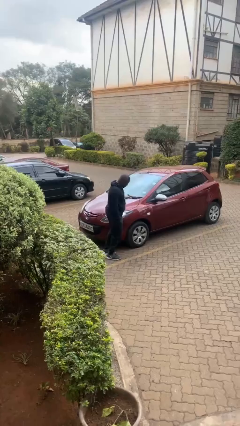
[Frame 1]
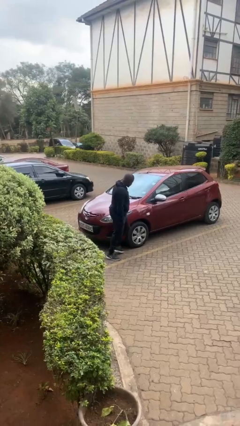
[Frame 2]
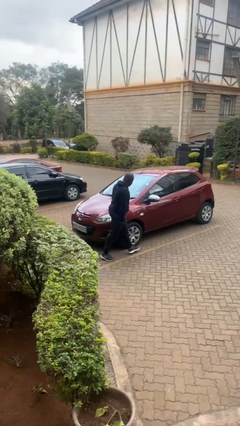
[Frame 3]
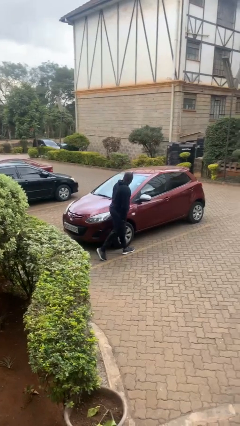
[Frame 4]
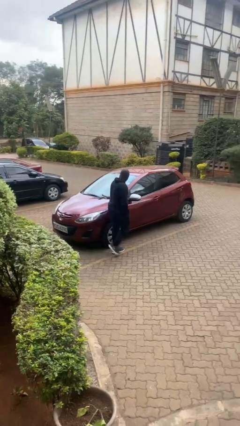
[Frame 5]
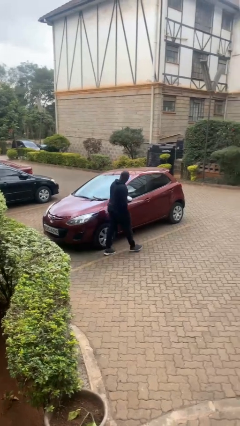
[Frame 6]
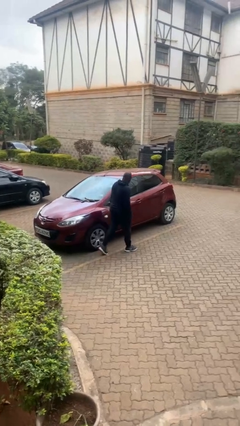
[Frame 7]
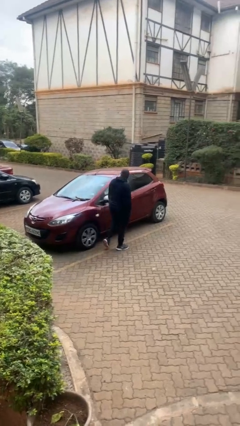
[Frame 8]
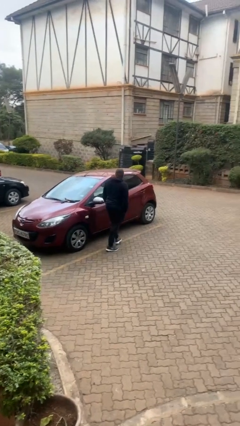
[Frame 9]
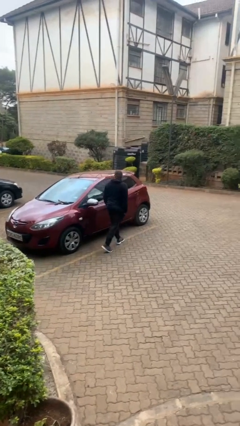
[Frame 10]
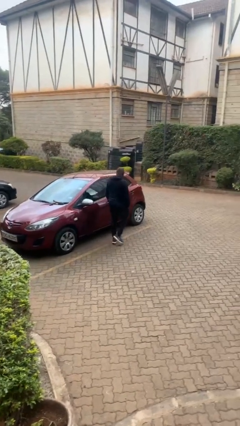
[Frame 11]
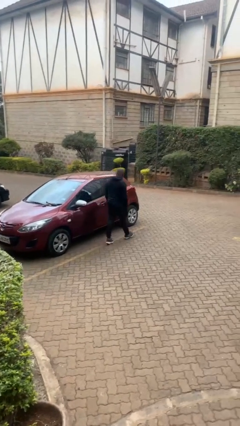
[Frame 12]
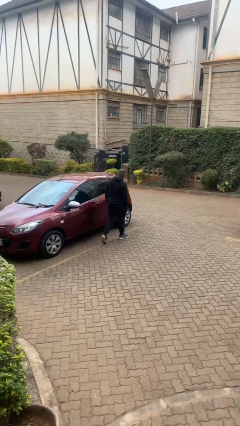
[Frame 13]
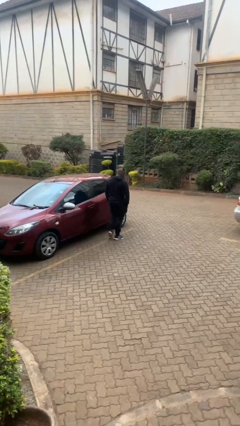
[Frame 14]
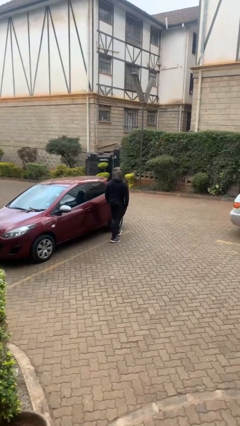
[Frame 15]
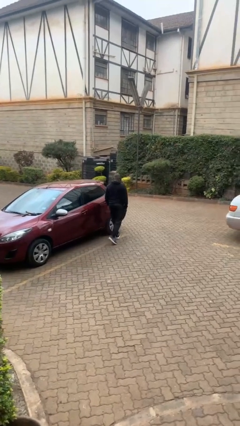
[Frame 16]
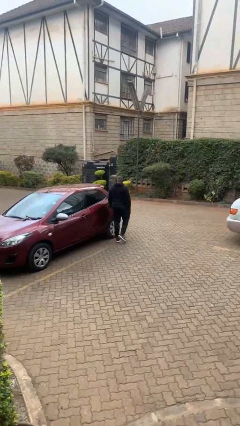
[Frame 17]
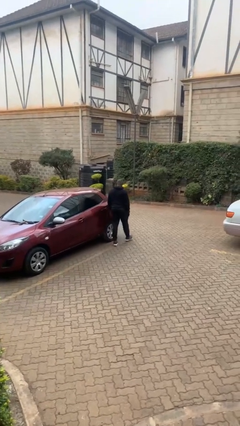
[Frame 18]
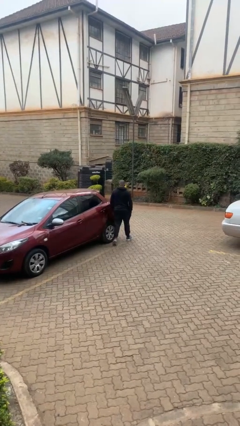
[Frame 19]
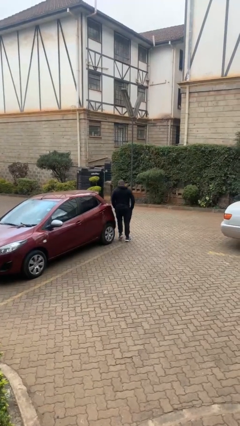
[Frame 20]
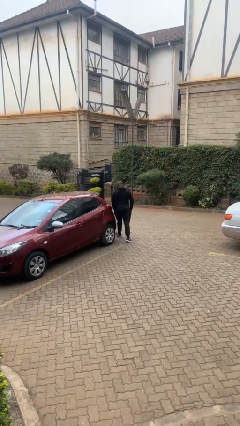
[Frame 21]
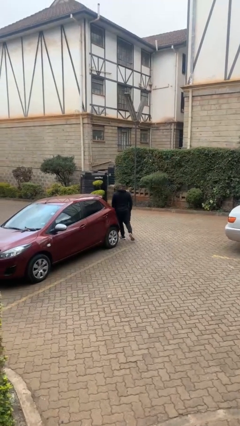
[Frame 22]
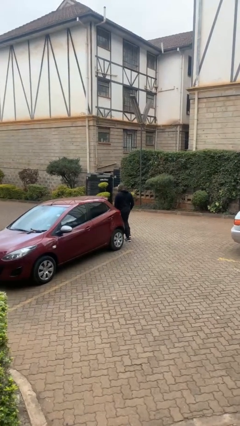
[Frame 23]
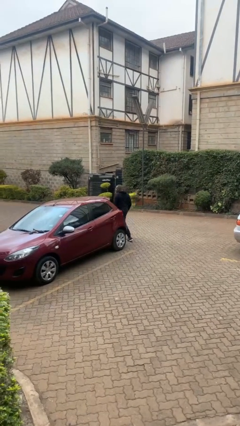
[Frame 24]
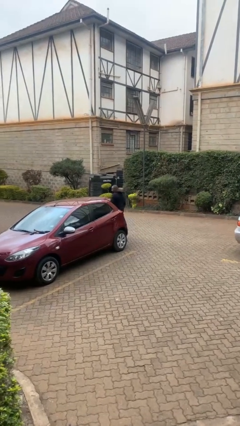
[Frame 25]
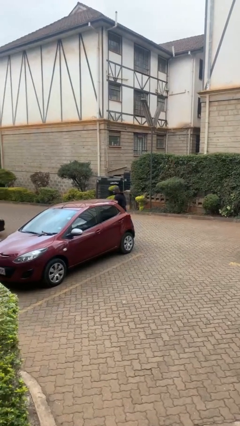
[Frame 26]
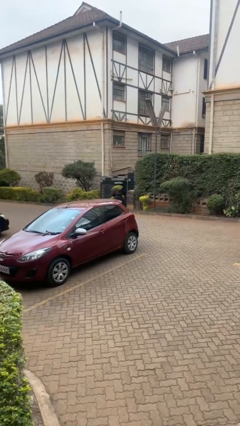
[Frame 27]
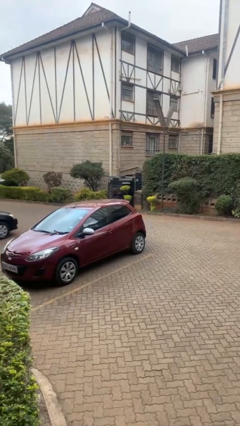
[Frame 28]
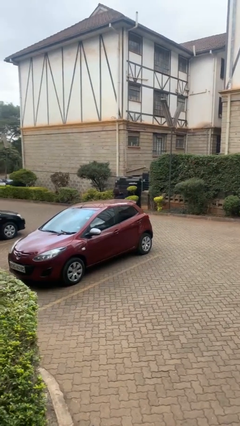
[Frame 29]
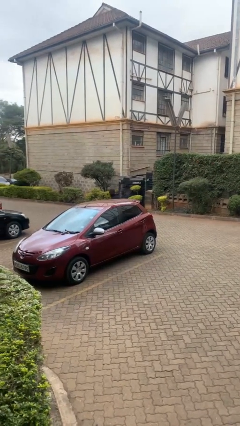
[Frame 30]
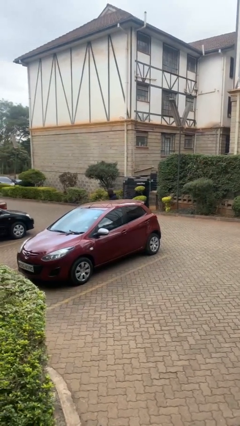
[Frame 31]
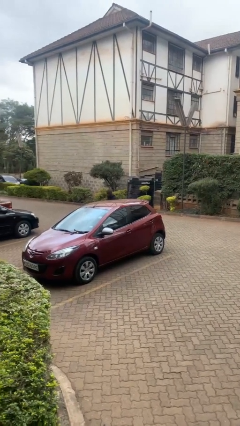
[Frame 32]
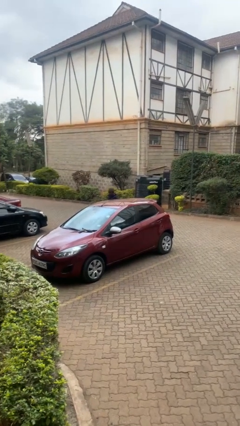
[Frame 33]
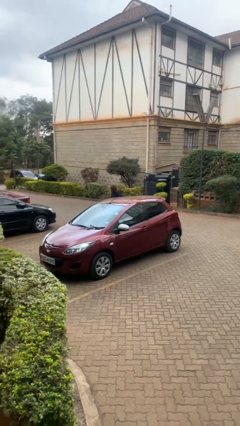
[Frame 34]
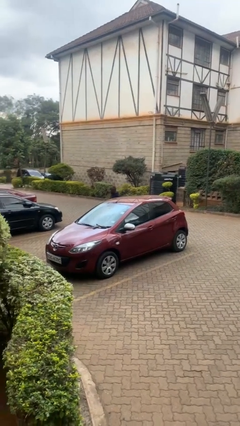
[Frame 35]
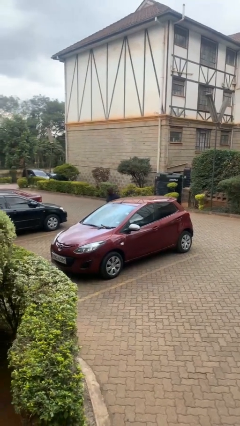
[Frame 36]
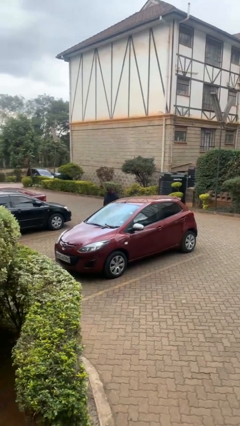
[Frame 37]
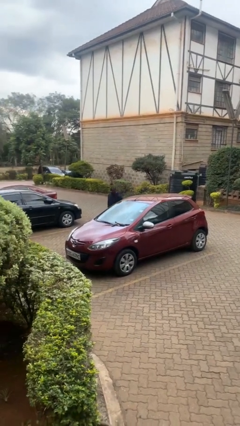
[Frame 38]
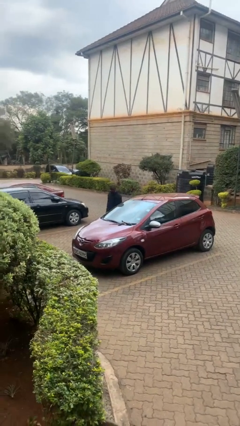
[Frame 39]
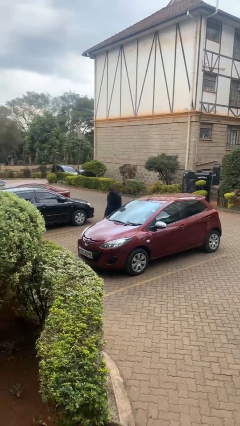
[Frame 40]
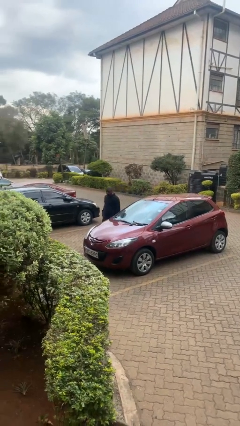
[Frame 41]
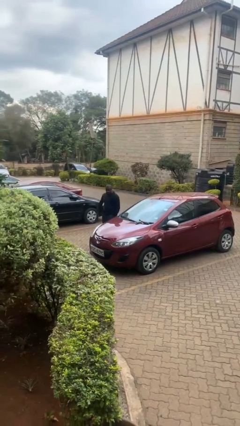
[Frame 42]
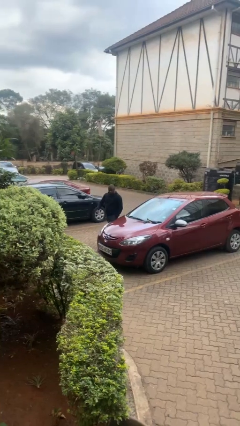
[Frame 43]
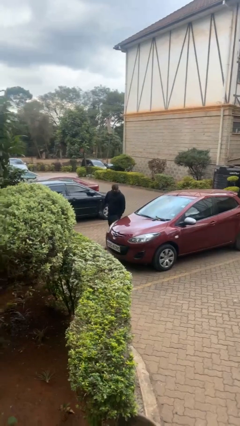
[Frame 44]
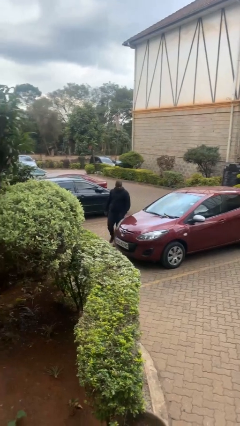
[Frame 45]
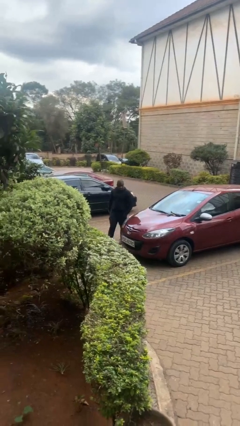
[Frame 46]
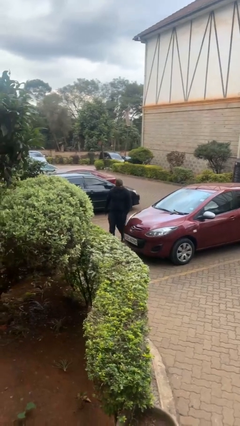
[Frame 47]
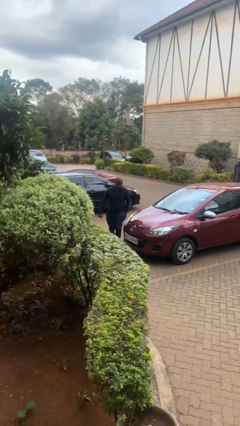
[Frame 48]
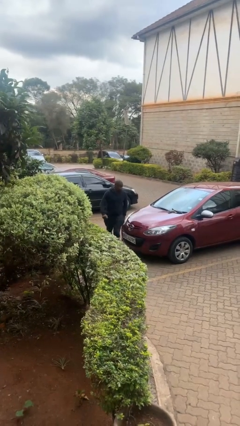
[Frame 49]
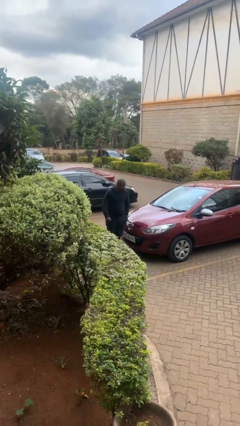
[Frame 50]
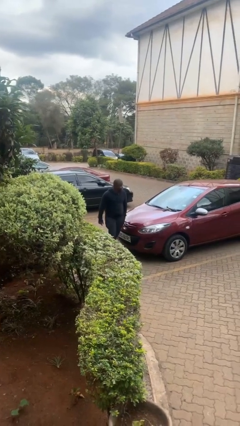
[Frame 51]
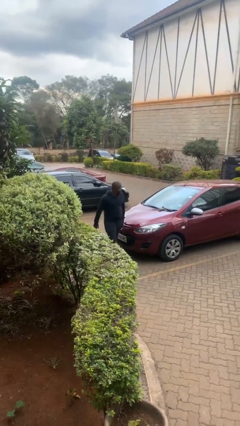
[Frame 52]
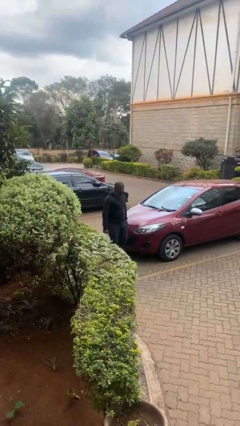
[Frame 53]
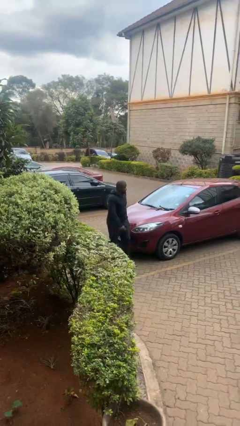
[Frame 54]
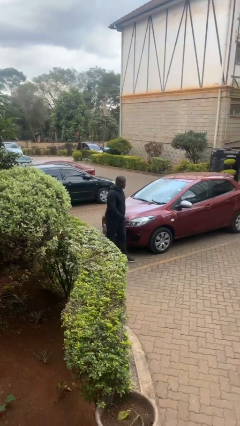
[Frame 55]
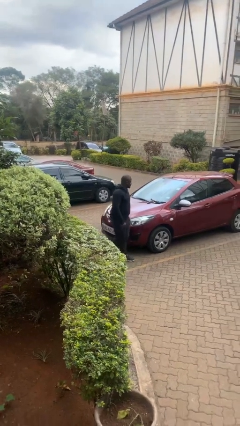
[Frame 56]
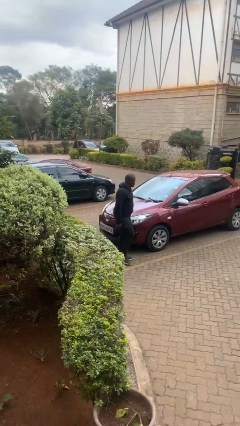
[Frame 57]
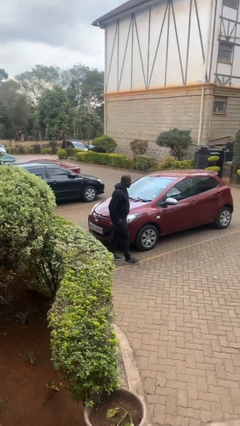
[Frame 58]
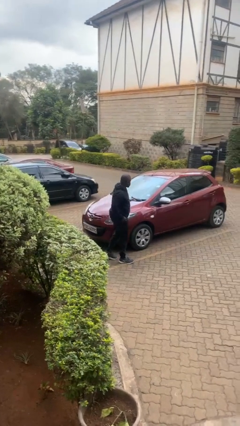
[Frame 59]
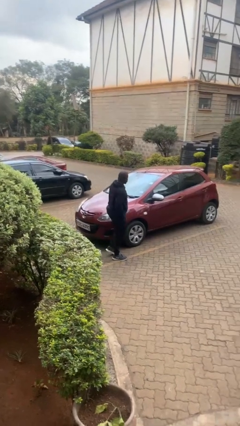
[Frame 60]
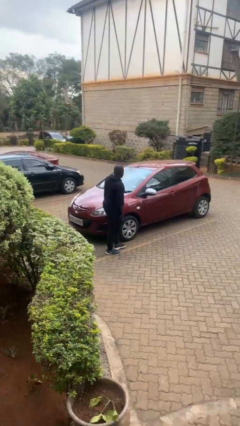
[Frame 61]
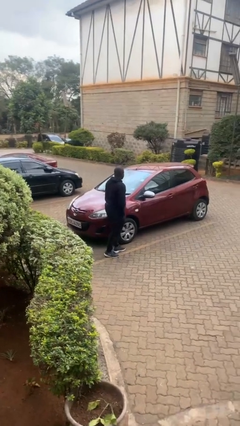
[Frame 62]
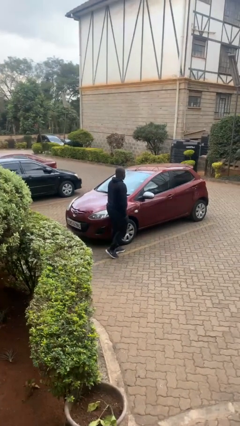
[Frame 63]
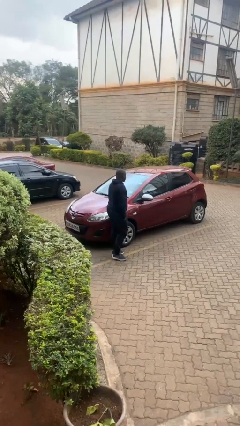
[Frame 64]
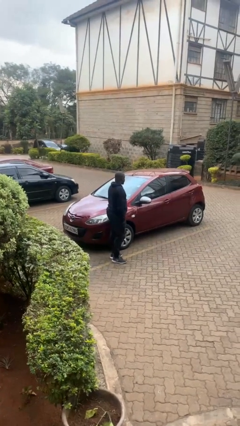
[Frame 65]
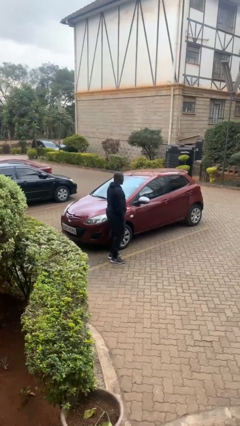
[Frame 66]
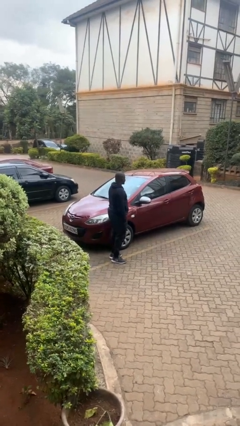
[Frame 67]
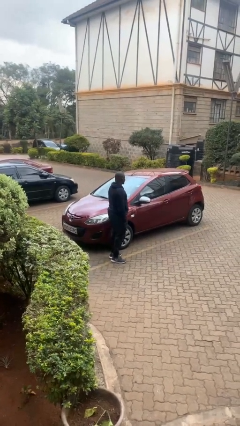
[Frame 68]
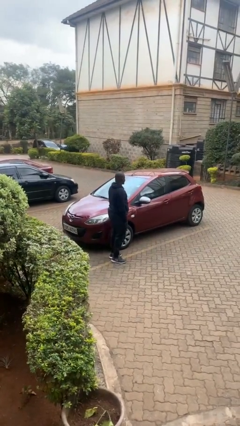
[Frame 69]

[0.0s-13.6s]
person walks around car

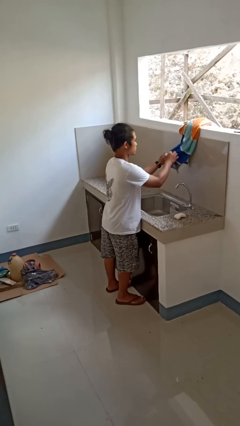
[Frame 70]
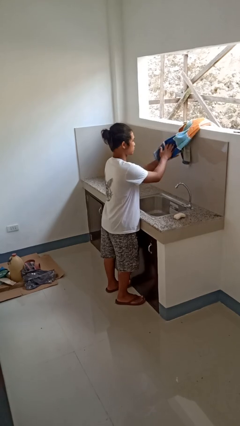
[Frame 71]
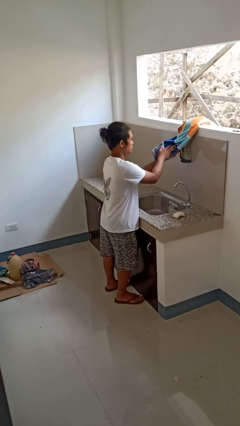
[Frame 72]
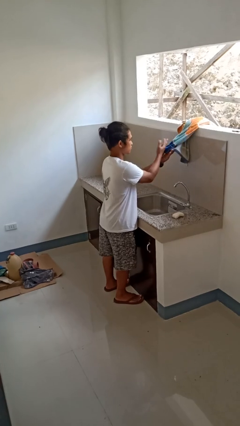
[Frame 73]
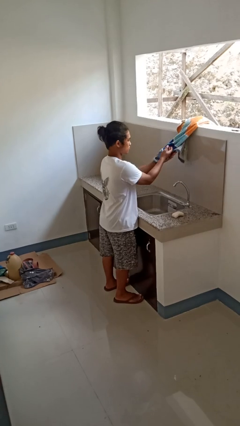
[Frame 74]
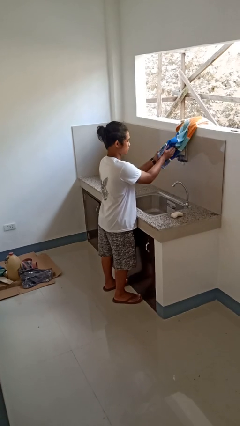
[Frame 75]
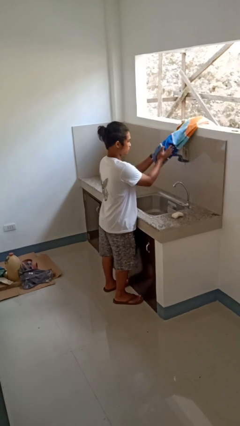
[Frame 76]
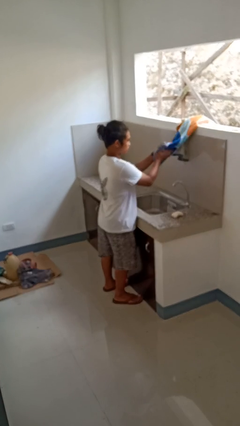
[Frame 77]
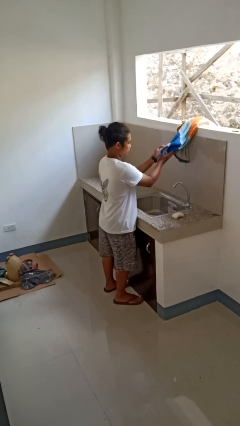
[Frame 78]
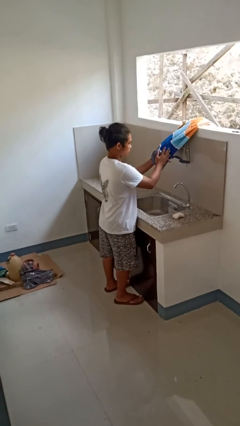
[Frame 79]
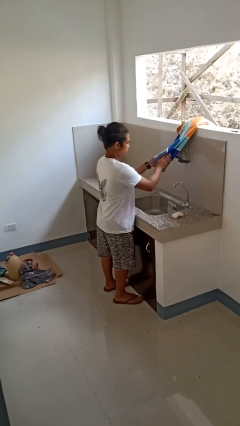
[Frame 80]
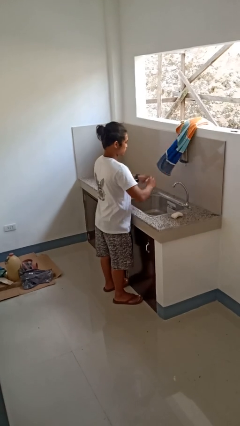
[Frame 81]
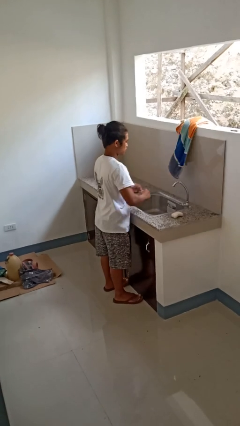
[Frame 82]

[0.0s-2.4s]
person dries hands with towel

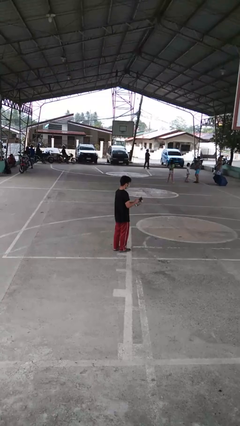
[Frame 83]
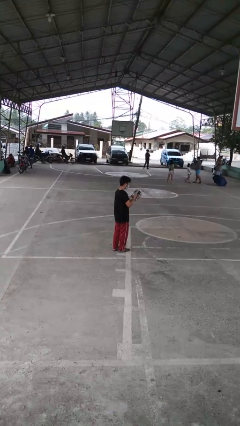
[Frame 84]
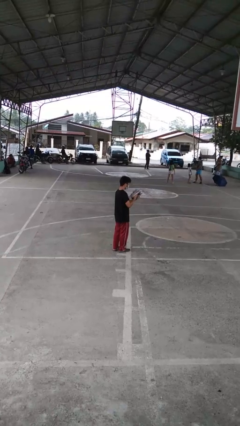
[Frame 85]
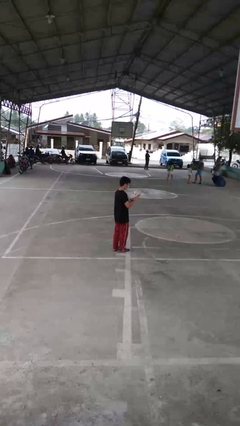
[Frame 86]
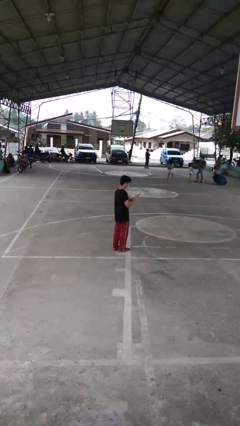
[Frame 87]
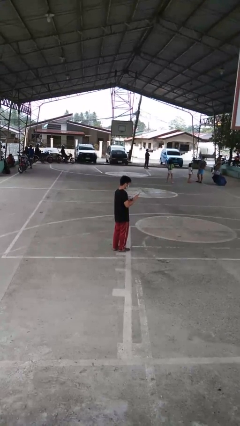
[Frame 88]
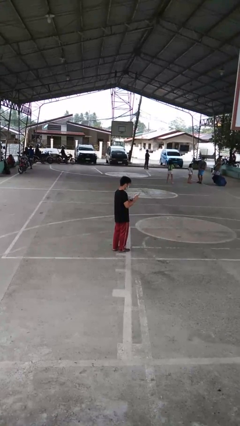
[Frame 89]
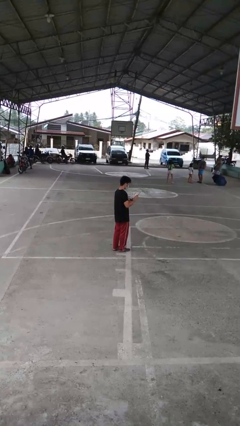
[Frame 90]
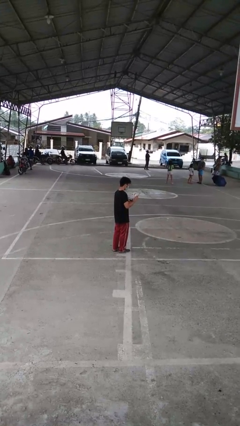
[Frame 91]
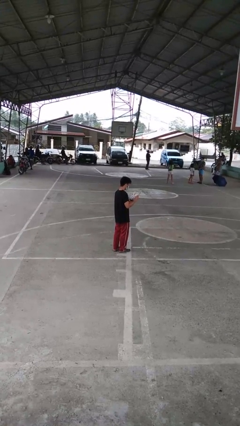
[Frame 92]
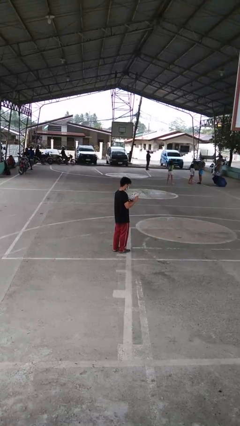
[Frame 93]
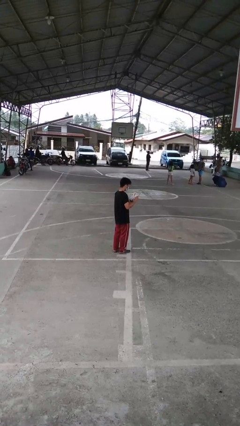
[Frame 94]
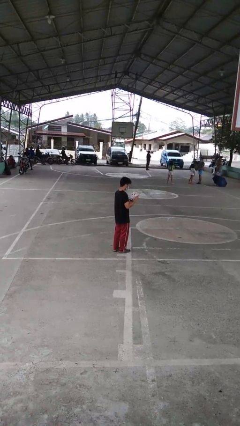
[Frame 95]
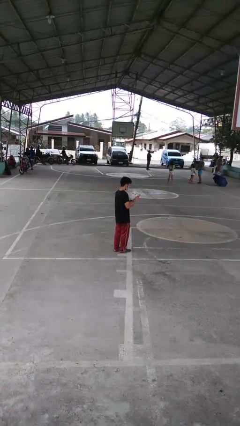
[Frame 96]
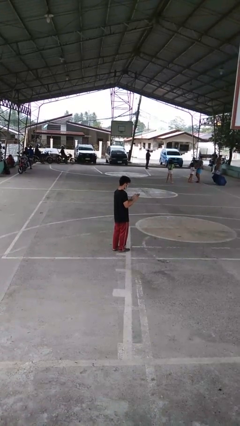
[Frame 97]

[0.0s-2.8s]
person reads magazine
